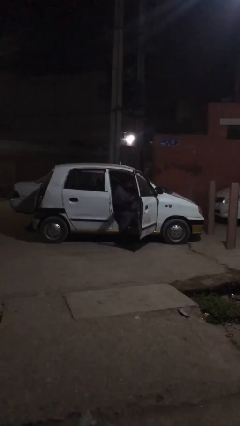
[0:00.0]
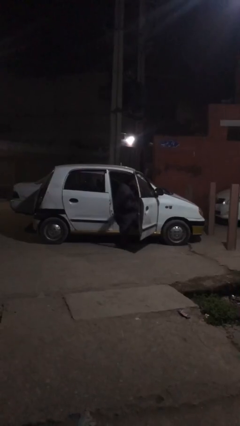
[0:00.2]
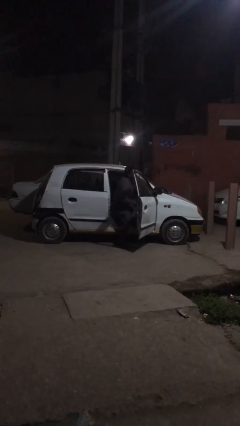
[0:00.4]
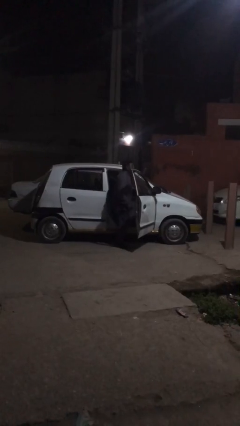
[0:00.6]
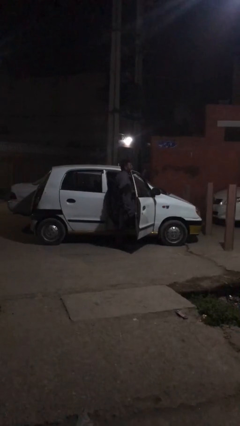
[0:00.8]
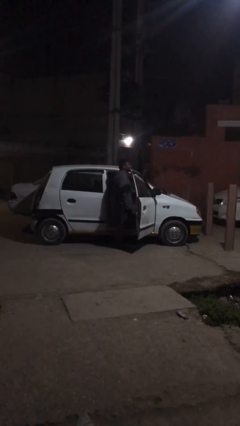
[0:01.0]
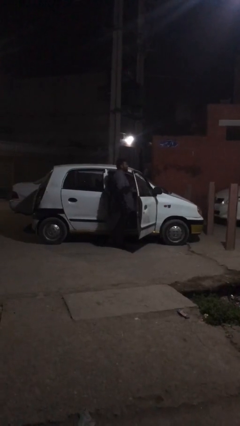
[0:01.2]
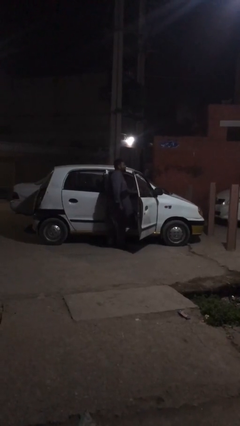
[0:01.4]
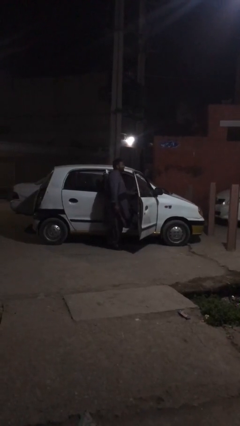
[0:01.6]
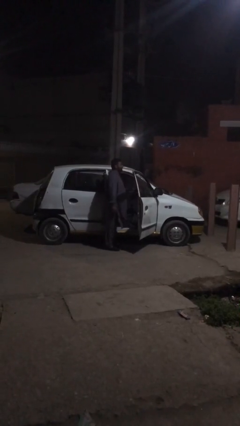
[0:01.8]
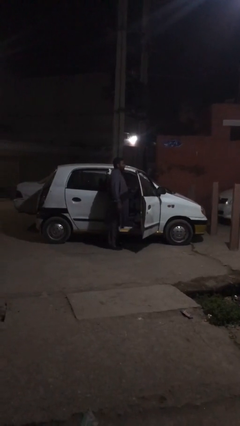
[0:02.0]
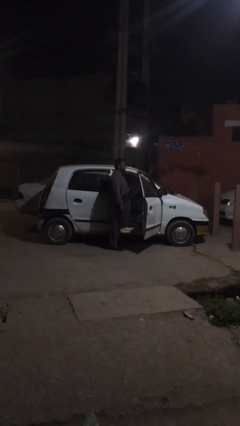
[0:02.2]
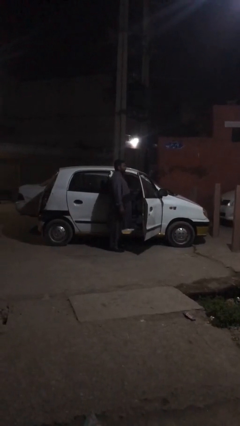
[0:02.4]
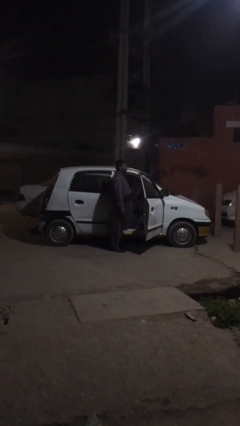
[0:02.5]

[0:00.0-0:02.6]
person exits car

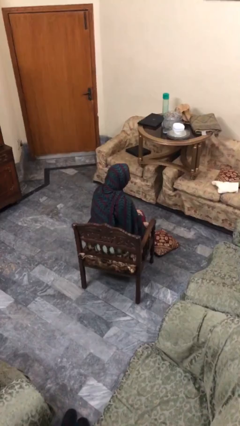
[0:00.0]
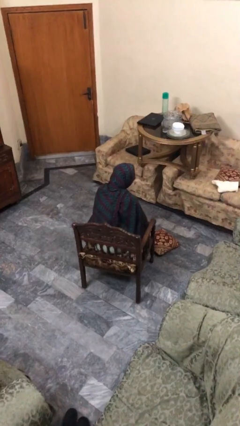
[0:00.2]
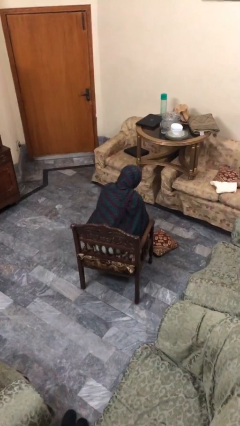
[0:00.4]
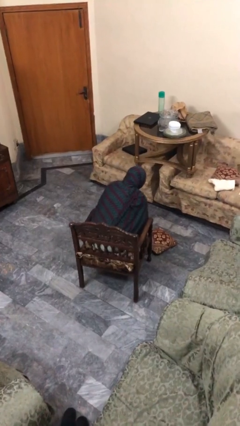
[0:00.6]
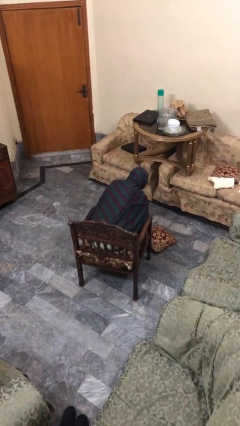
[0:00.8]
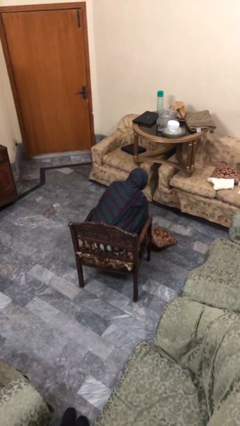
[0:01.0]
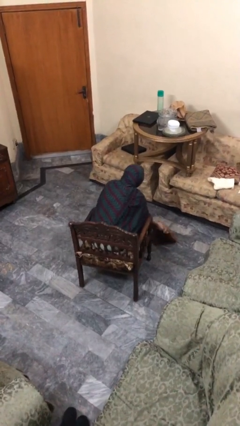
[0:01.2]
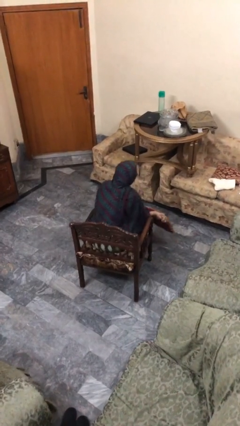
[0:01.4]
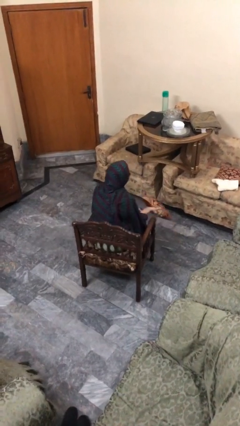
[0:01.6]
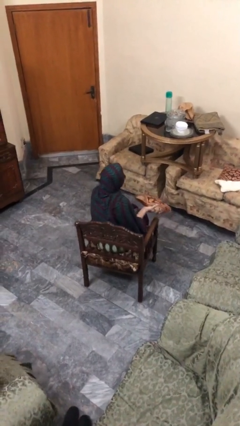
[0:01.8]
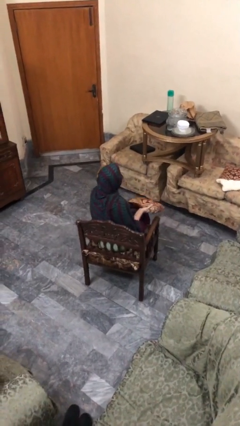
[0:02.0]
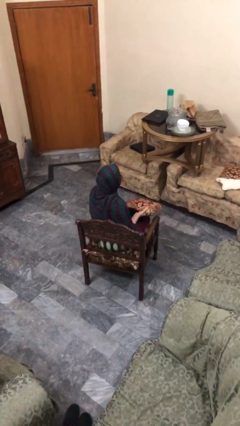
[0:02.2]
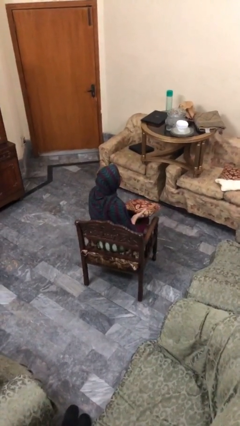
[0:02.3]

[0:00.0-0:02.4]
person picks up object from floor

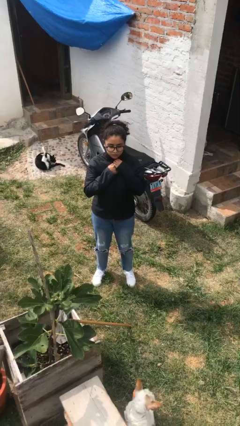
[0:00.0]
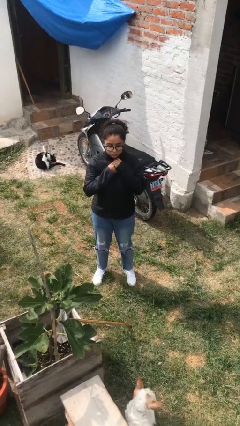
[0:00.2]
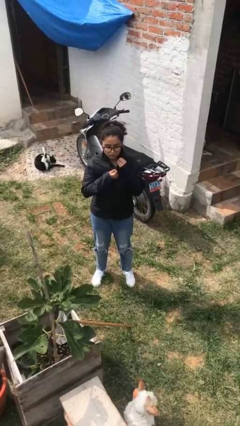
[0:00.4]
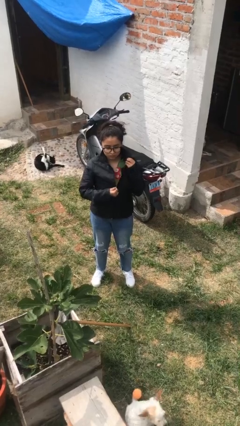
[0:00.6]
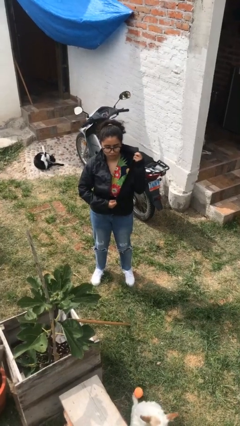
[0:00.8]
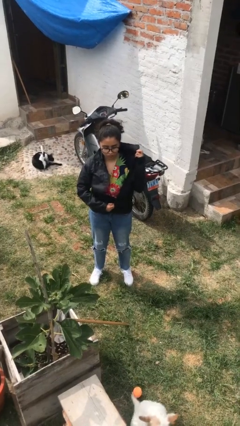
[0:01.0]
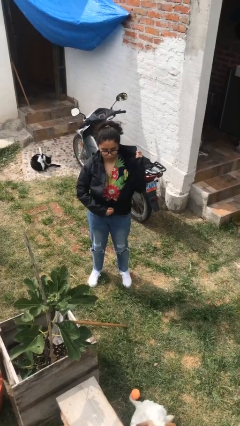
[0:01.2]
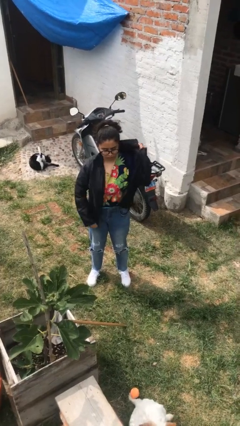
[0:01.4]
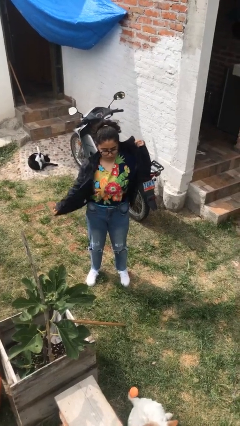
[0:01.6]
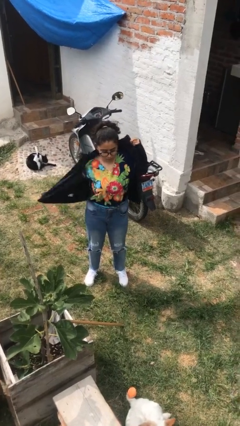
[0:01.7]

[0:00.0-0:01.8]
person unzips jacket

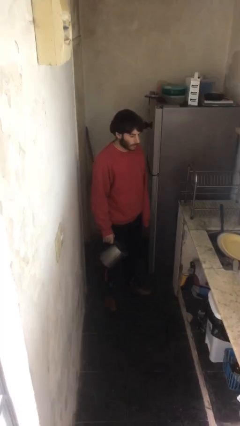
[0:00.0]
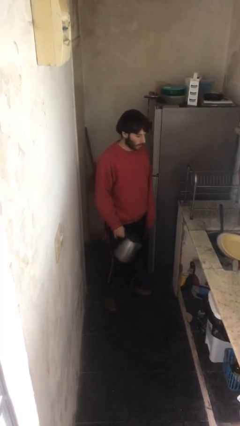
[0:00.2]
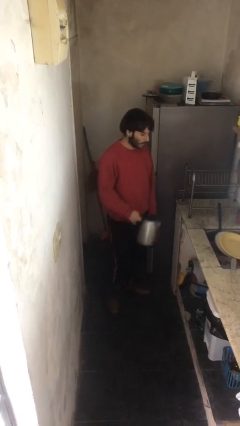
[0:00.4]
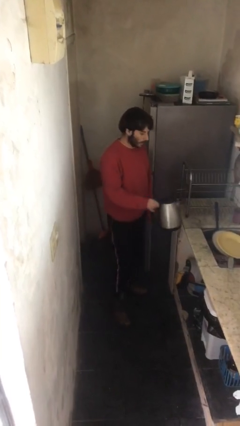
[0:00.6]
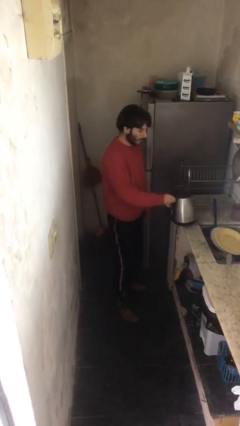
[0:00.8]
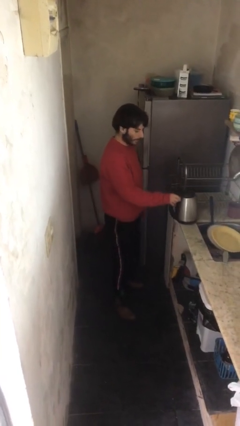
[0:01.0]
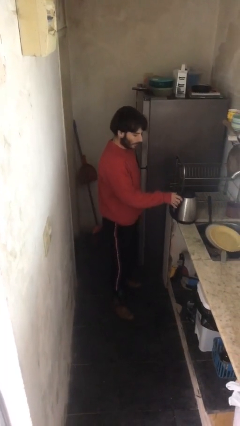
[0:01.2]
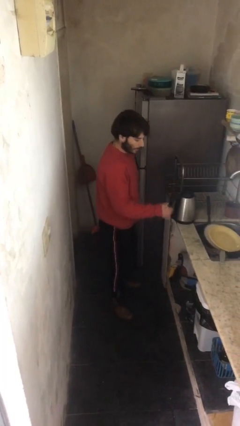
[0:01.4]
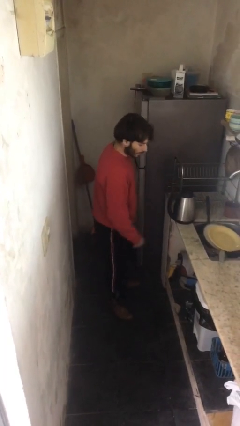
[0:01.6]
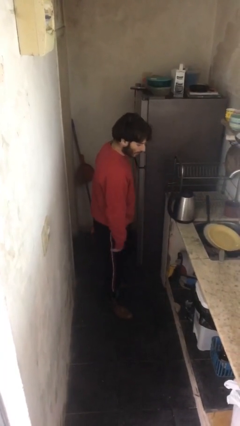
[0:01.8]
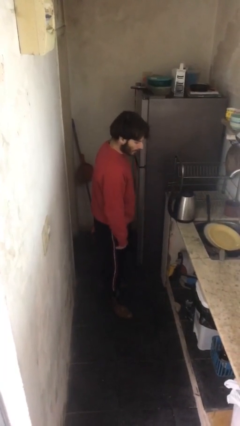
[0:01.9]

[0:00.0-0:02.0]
person puts down object on countertop

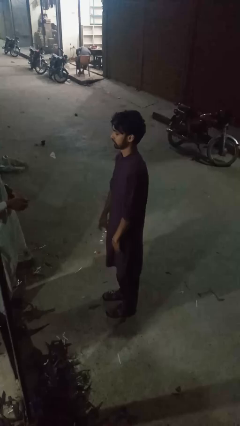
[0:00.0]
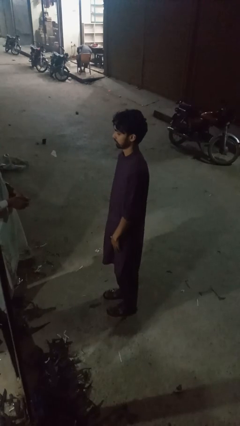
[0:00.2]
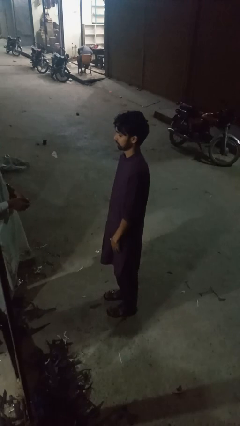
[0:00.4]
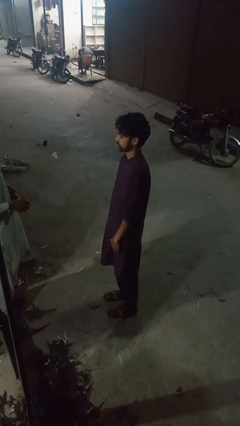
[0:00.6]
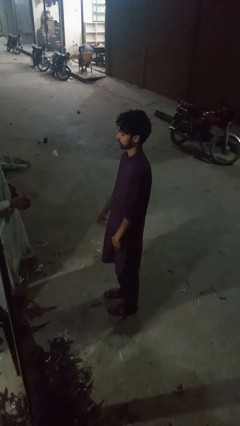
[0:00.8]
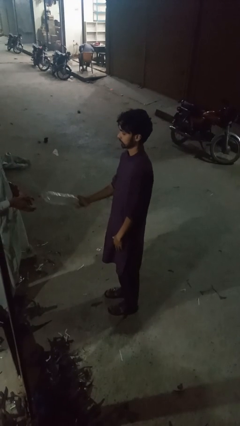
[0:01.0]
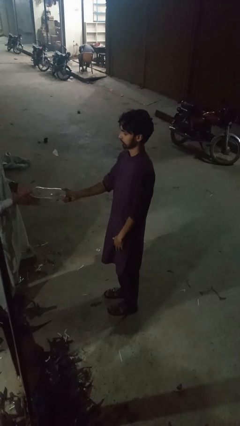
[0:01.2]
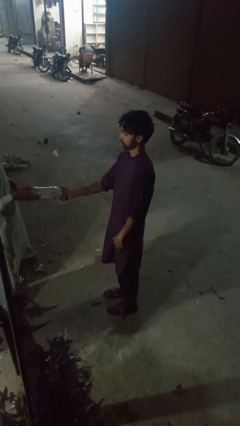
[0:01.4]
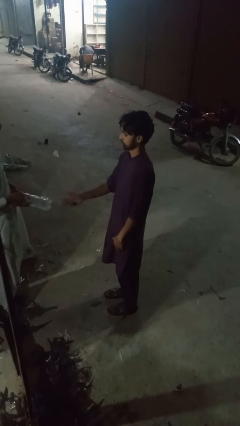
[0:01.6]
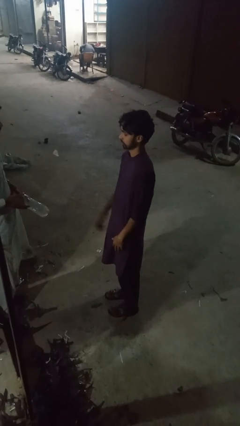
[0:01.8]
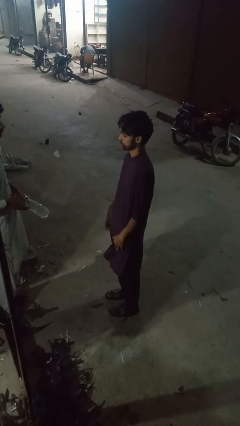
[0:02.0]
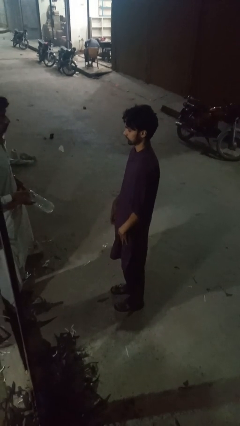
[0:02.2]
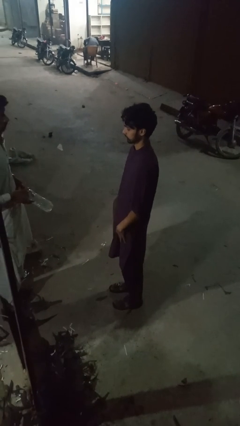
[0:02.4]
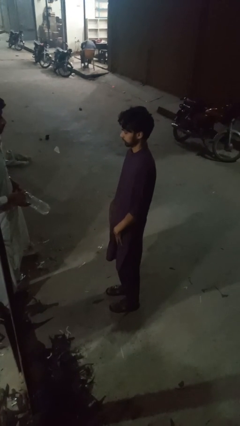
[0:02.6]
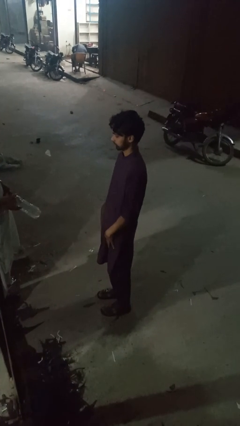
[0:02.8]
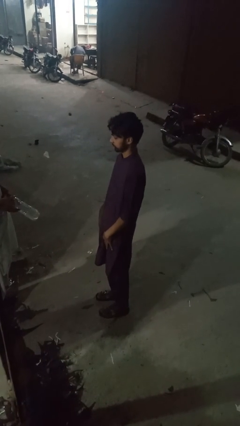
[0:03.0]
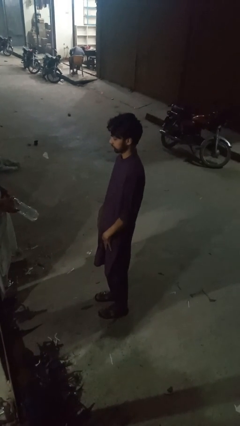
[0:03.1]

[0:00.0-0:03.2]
person throws object to person

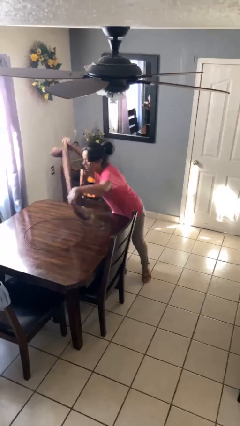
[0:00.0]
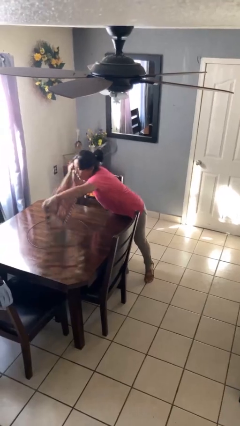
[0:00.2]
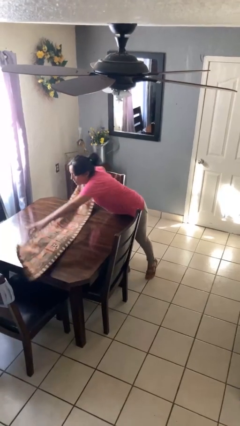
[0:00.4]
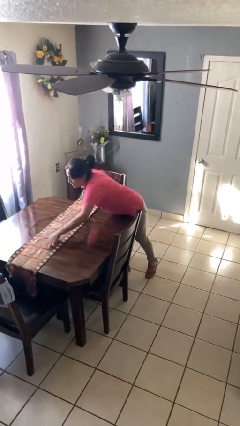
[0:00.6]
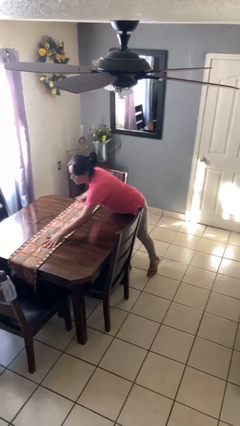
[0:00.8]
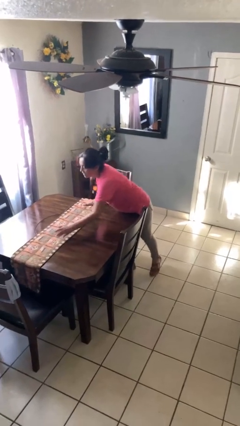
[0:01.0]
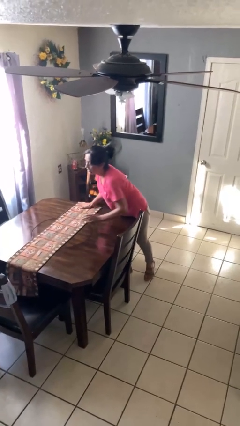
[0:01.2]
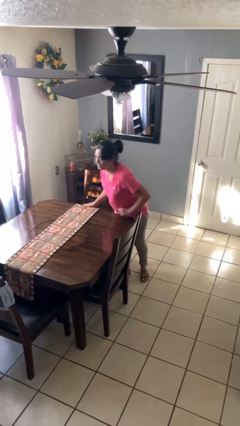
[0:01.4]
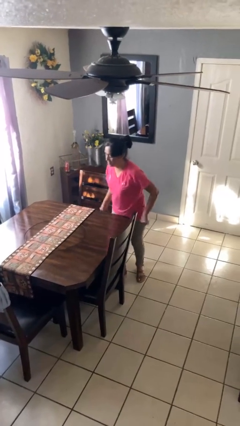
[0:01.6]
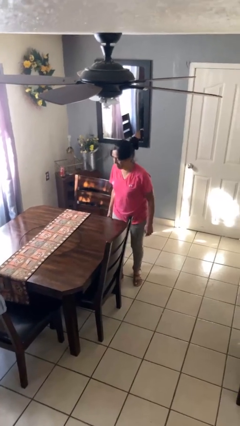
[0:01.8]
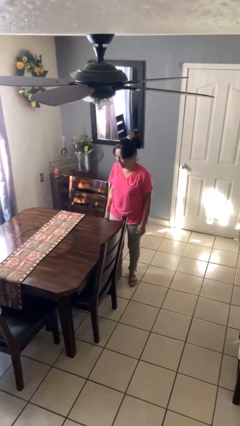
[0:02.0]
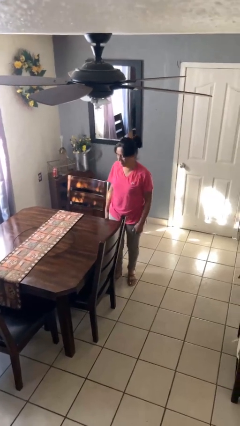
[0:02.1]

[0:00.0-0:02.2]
person spreads tablecloth

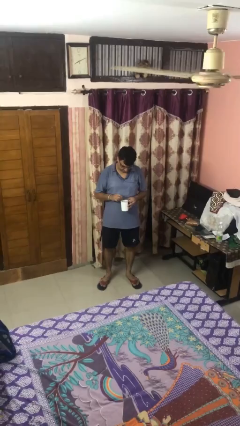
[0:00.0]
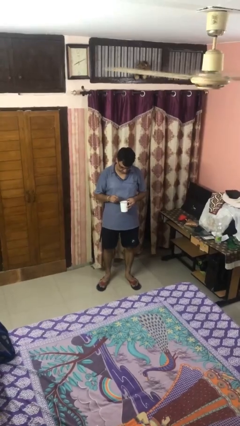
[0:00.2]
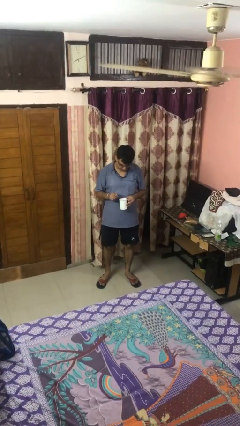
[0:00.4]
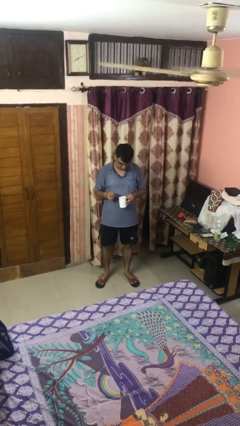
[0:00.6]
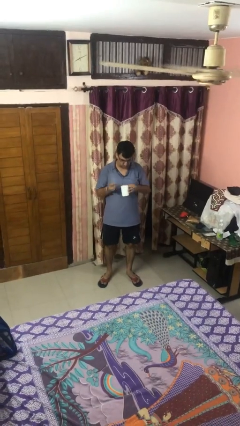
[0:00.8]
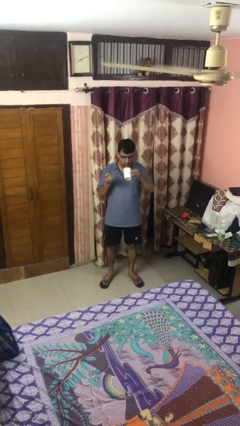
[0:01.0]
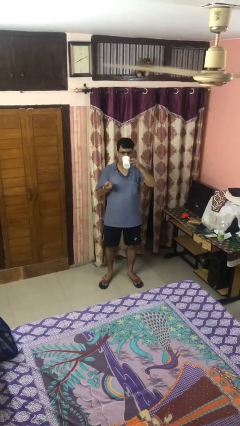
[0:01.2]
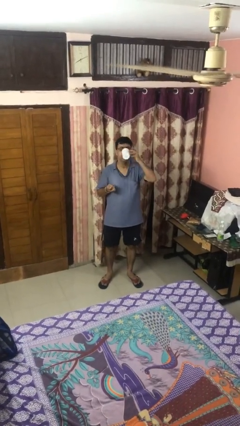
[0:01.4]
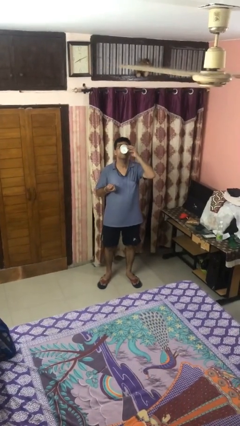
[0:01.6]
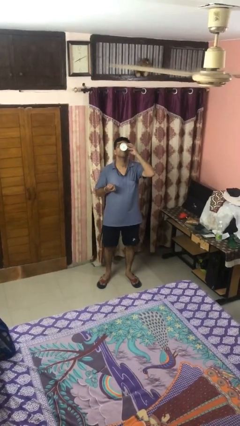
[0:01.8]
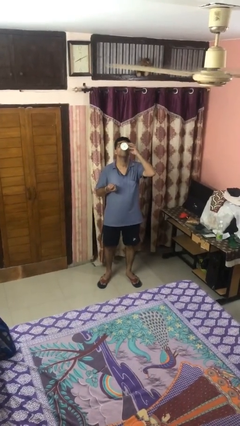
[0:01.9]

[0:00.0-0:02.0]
person drinks from mug

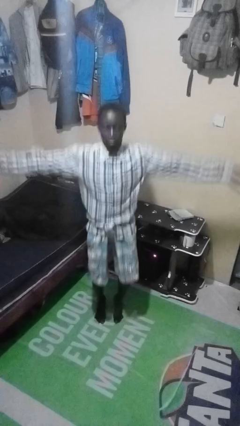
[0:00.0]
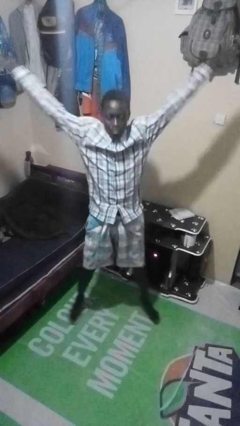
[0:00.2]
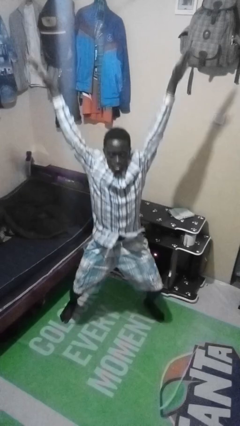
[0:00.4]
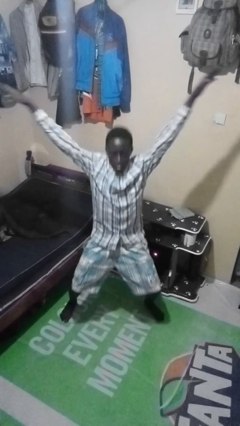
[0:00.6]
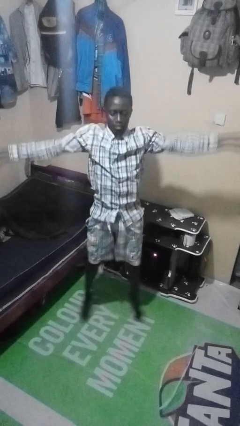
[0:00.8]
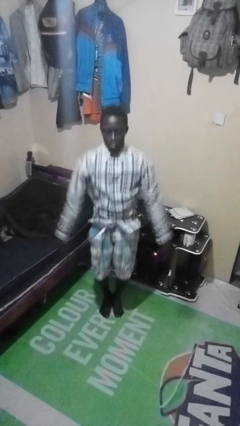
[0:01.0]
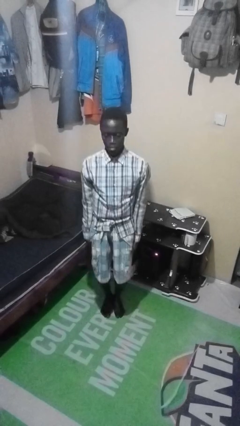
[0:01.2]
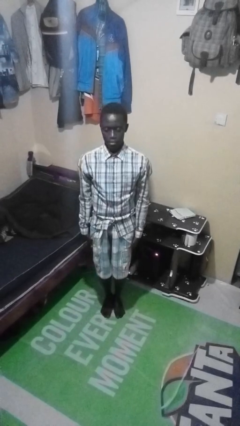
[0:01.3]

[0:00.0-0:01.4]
person exercises with jumping jacks
